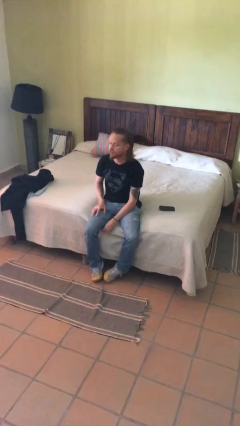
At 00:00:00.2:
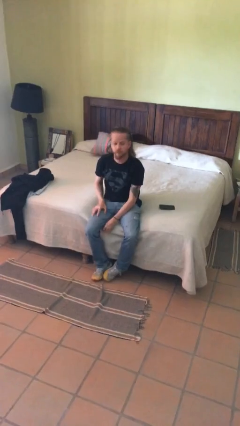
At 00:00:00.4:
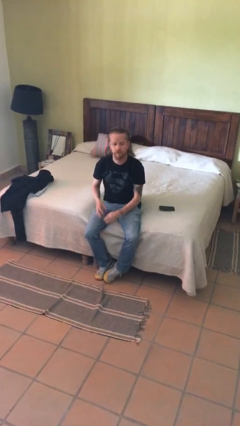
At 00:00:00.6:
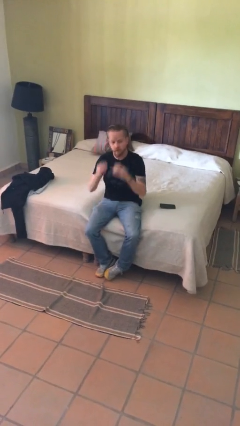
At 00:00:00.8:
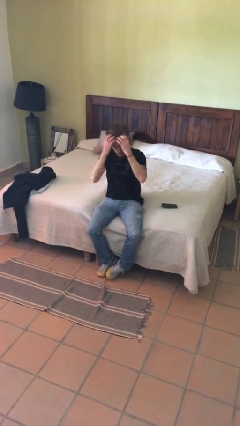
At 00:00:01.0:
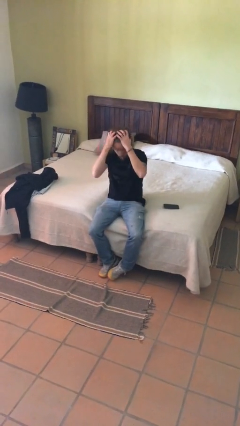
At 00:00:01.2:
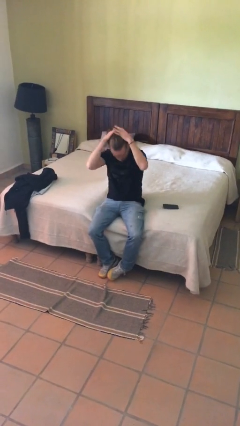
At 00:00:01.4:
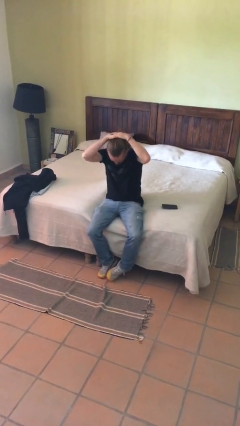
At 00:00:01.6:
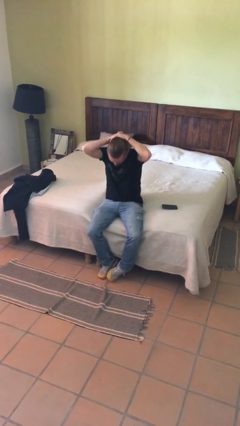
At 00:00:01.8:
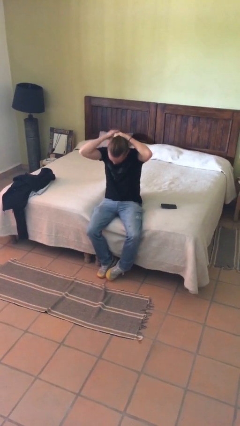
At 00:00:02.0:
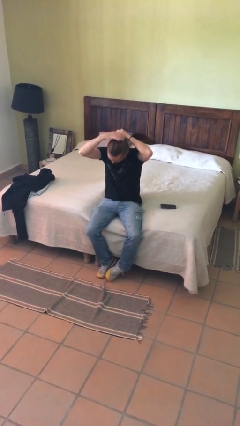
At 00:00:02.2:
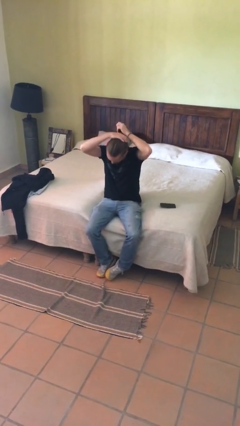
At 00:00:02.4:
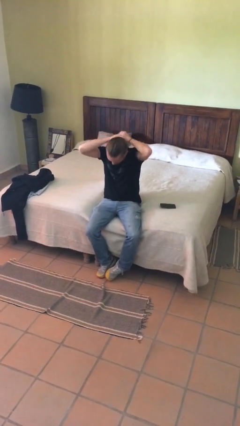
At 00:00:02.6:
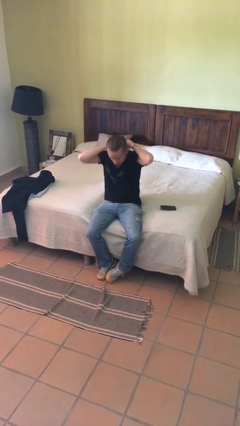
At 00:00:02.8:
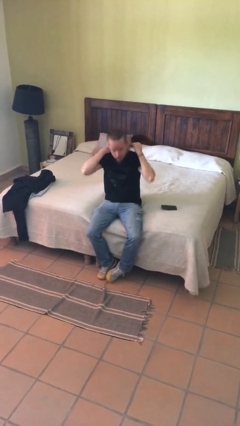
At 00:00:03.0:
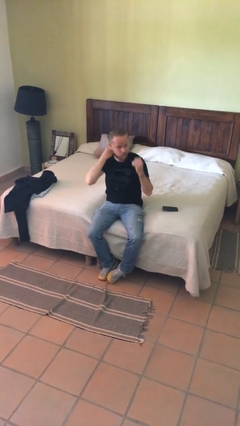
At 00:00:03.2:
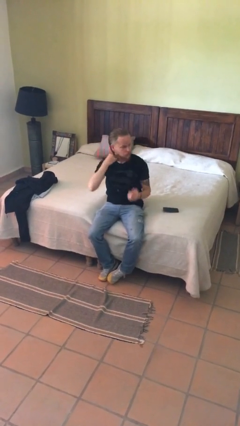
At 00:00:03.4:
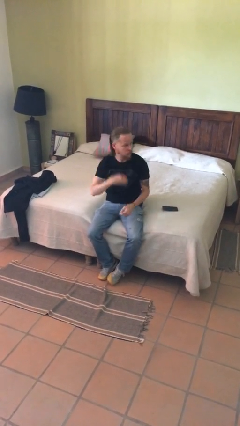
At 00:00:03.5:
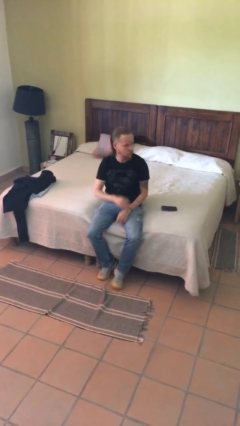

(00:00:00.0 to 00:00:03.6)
person strokes hair

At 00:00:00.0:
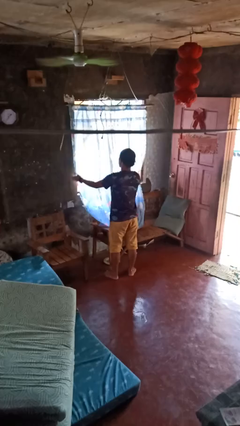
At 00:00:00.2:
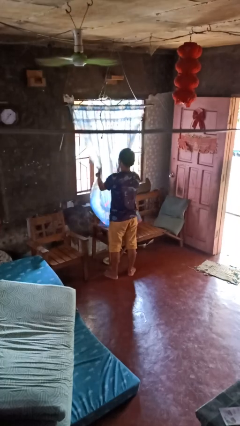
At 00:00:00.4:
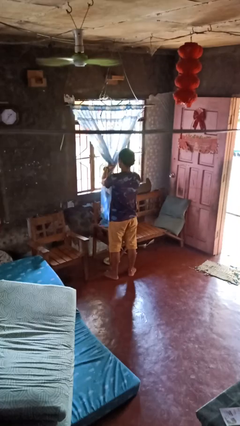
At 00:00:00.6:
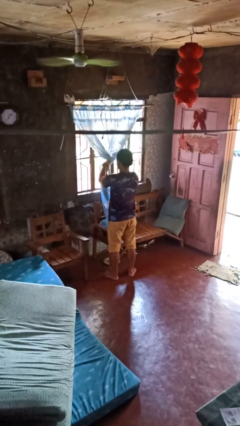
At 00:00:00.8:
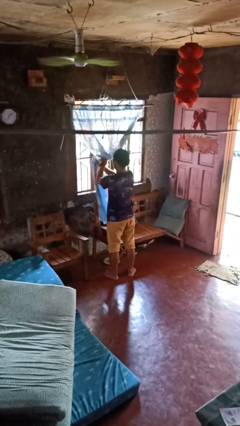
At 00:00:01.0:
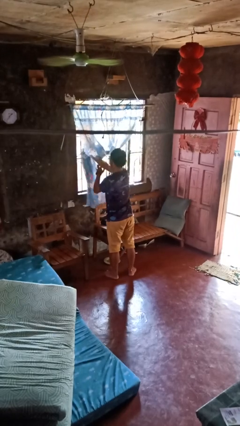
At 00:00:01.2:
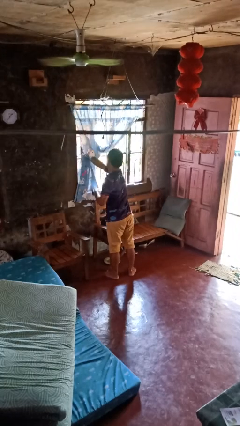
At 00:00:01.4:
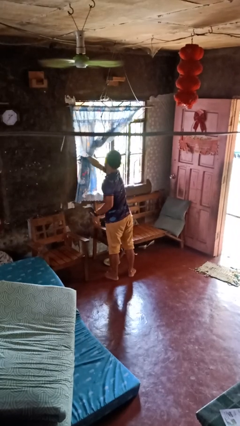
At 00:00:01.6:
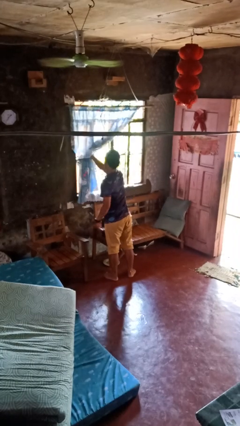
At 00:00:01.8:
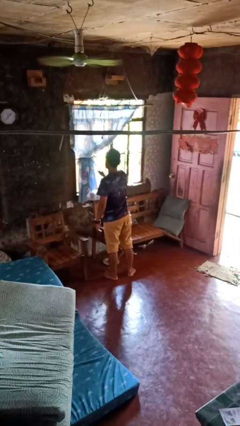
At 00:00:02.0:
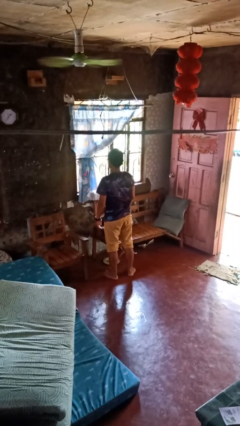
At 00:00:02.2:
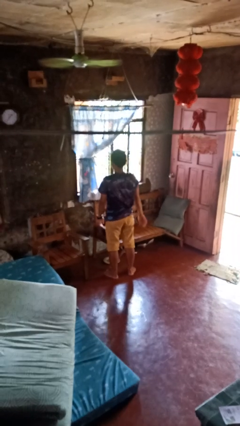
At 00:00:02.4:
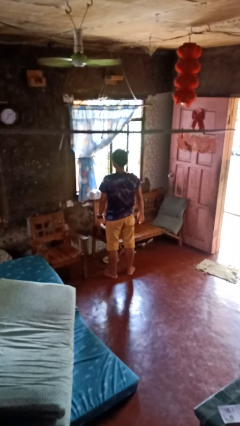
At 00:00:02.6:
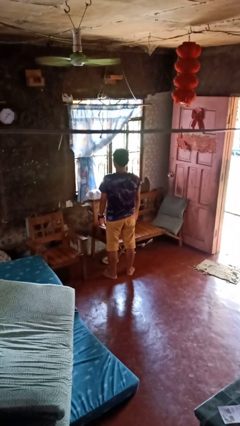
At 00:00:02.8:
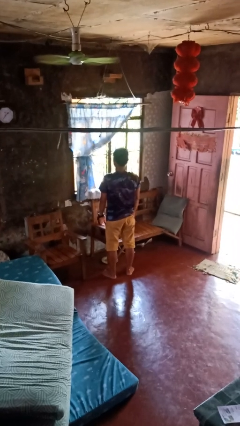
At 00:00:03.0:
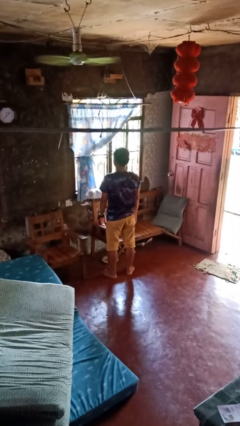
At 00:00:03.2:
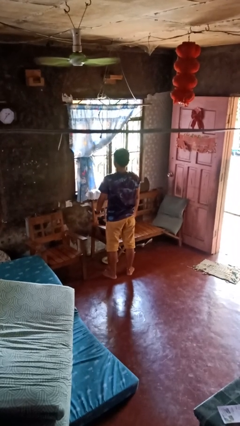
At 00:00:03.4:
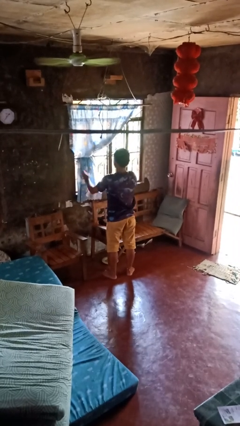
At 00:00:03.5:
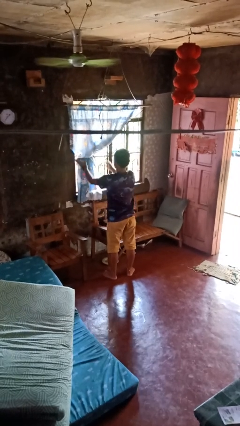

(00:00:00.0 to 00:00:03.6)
person opens curtains

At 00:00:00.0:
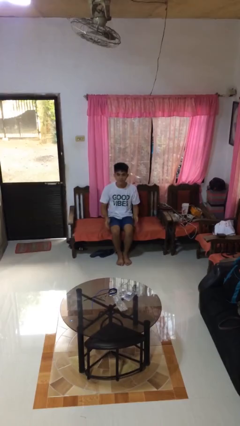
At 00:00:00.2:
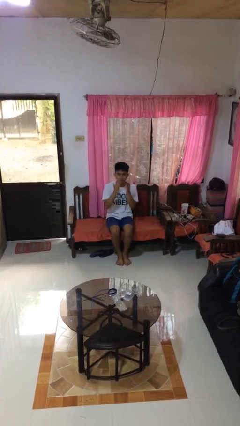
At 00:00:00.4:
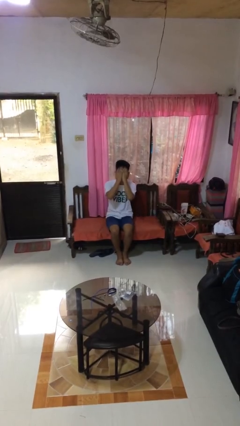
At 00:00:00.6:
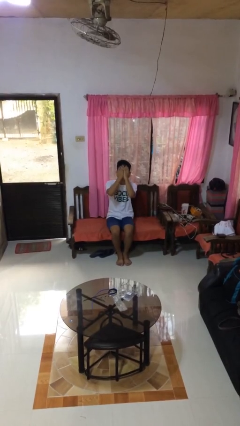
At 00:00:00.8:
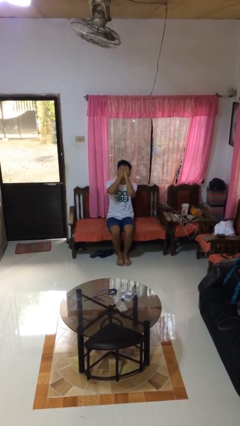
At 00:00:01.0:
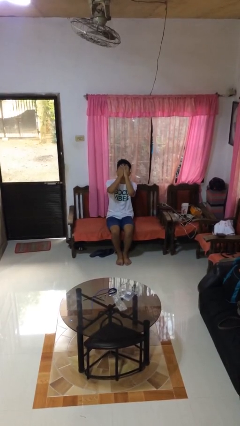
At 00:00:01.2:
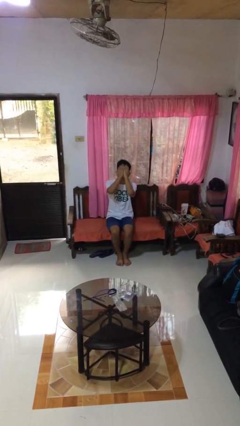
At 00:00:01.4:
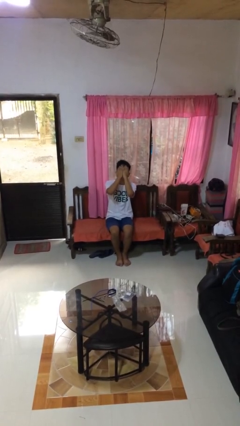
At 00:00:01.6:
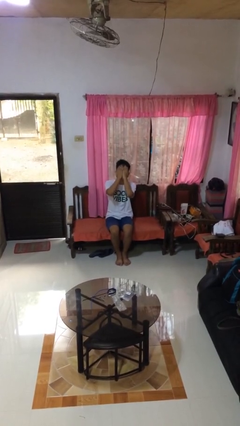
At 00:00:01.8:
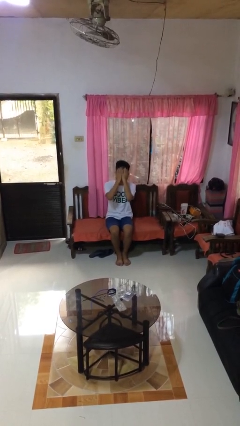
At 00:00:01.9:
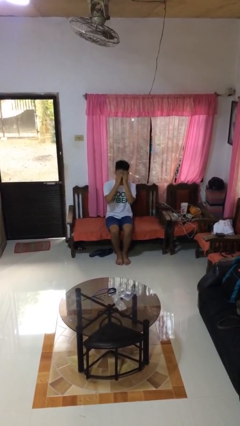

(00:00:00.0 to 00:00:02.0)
person covers face with hands

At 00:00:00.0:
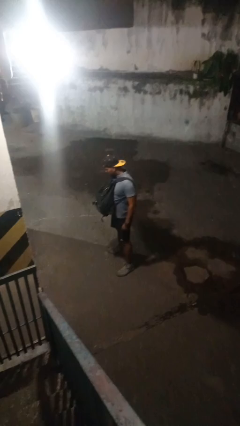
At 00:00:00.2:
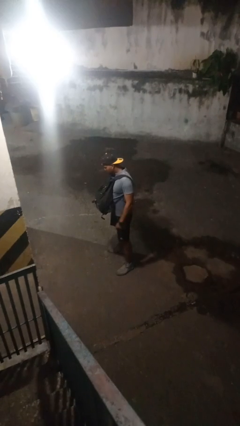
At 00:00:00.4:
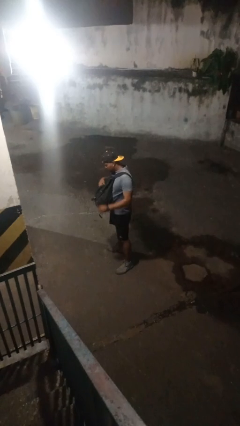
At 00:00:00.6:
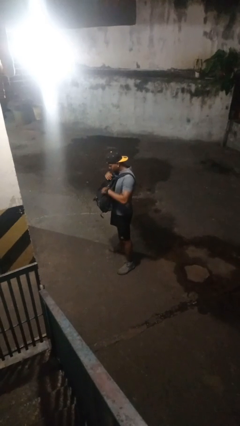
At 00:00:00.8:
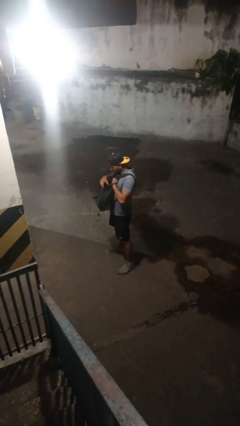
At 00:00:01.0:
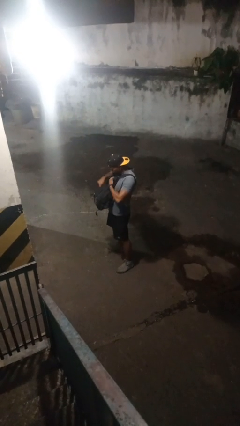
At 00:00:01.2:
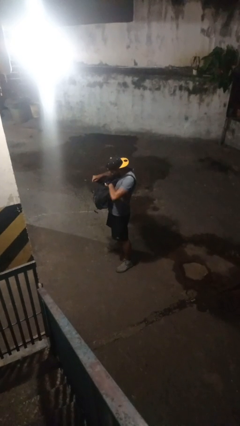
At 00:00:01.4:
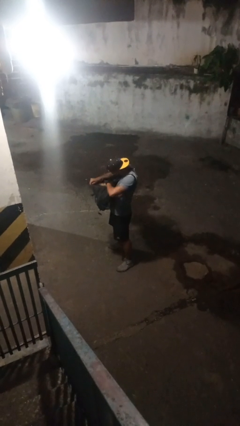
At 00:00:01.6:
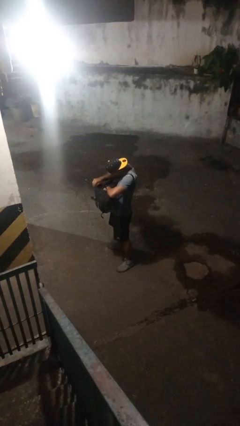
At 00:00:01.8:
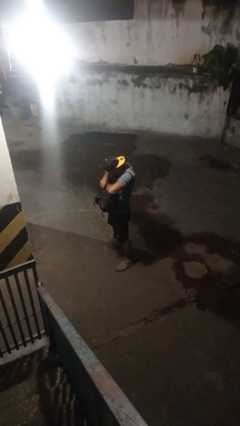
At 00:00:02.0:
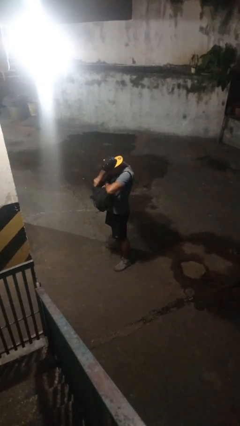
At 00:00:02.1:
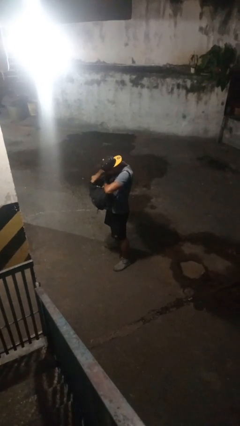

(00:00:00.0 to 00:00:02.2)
person searches in backpack

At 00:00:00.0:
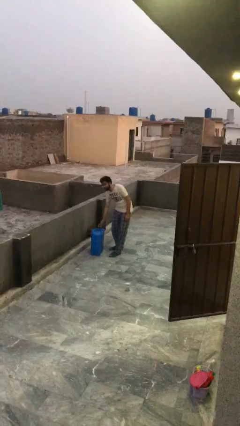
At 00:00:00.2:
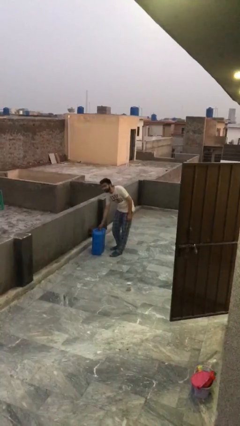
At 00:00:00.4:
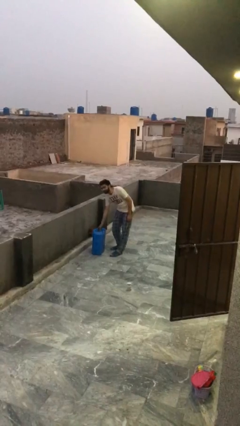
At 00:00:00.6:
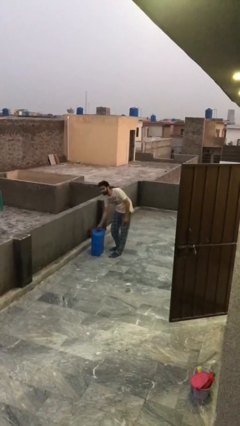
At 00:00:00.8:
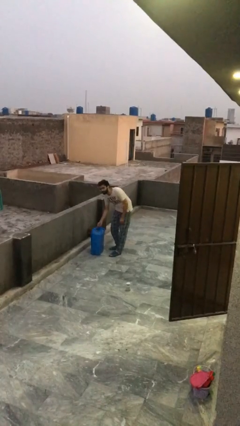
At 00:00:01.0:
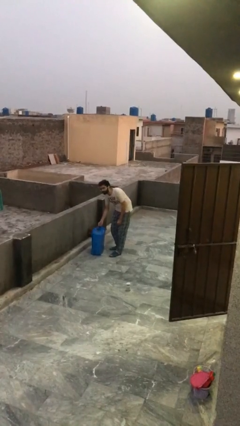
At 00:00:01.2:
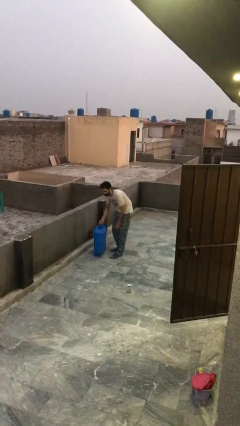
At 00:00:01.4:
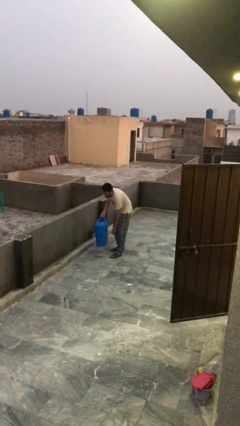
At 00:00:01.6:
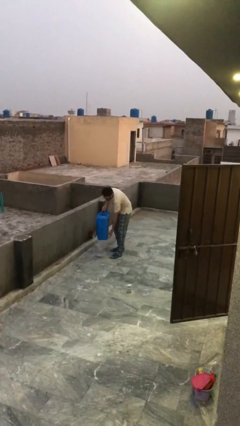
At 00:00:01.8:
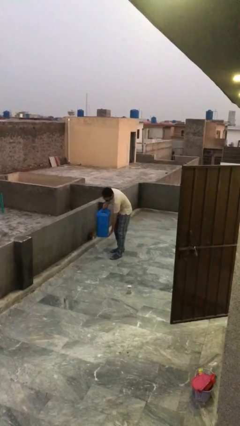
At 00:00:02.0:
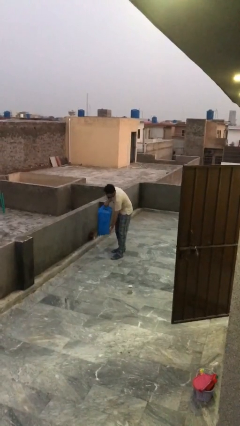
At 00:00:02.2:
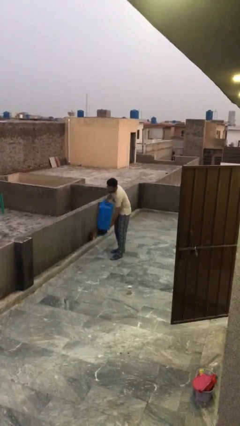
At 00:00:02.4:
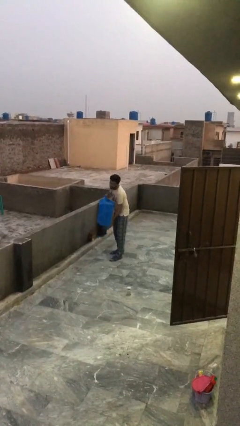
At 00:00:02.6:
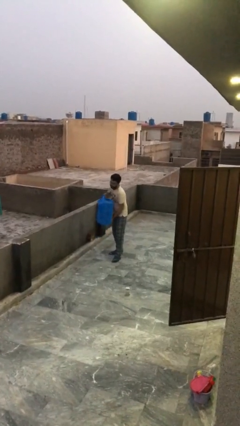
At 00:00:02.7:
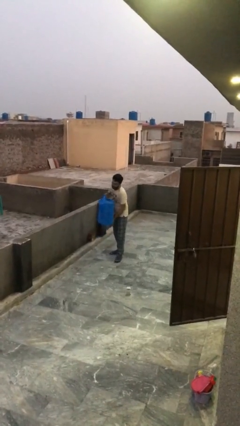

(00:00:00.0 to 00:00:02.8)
person picks up object from floor

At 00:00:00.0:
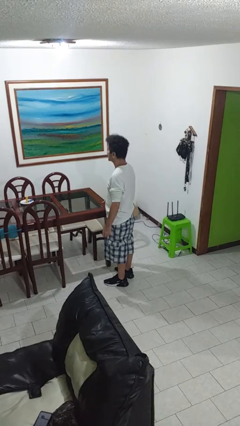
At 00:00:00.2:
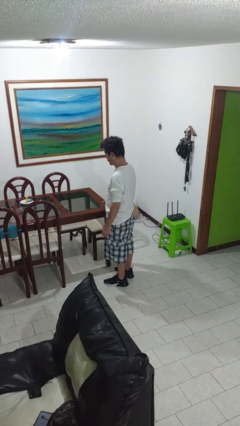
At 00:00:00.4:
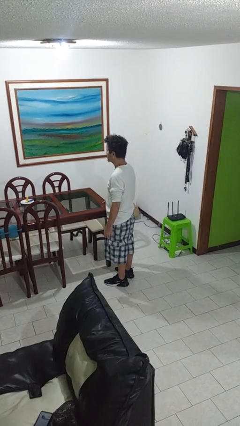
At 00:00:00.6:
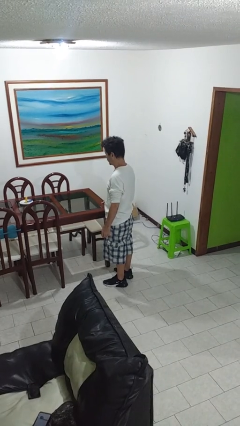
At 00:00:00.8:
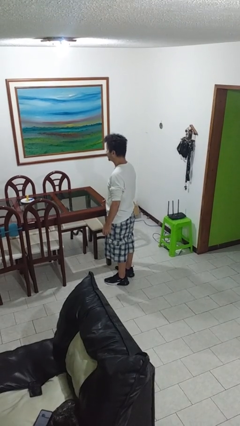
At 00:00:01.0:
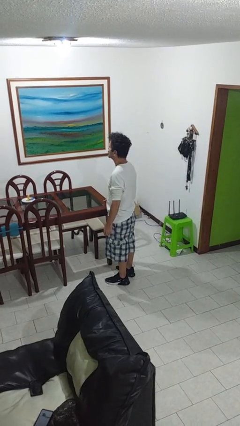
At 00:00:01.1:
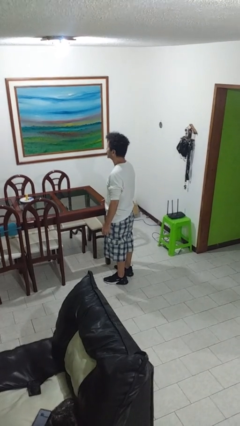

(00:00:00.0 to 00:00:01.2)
person nods head

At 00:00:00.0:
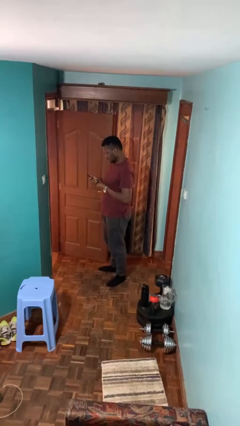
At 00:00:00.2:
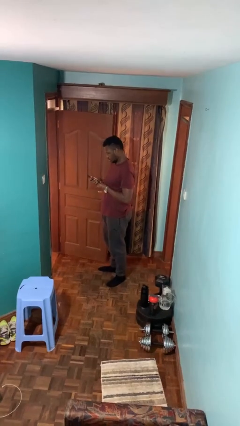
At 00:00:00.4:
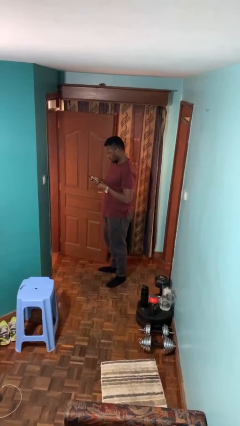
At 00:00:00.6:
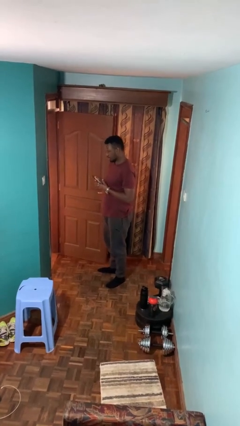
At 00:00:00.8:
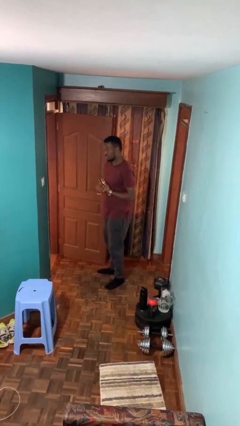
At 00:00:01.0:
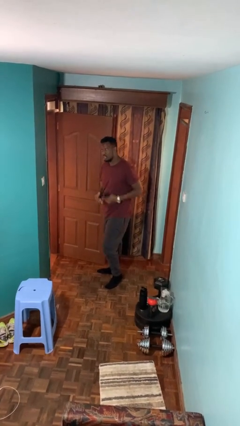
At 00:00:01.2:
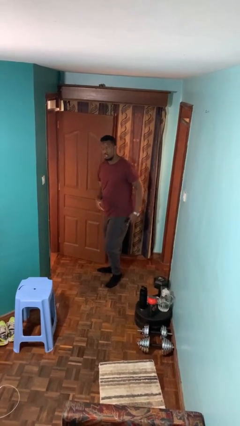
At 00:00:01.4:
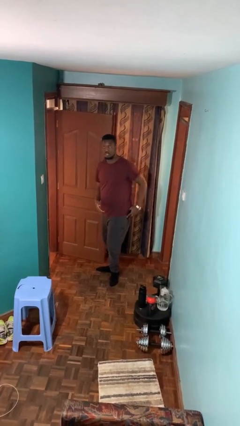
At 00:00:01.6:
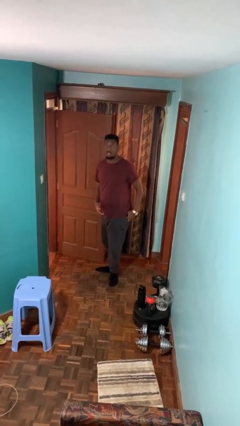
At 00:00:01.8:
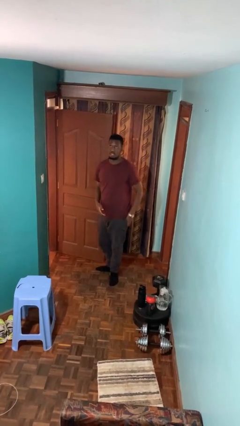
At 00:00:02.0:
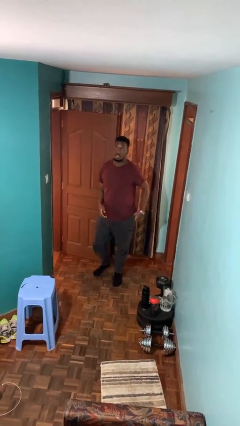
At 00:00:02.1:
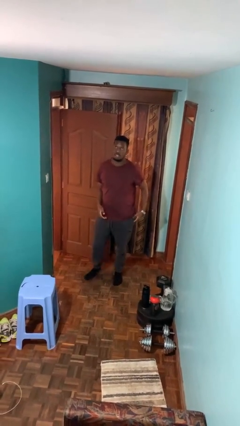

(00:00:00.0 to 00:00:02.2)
person puts phone into pocket
